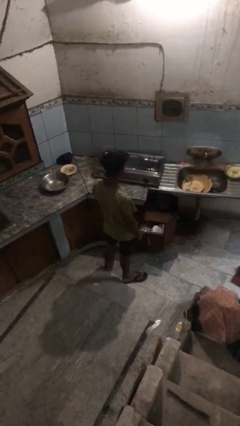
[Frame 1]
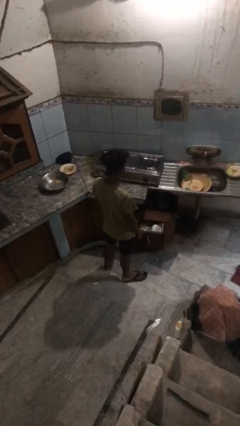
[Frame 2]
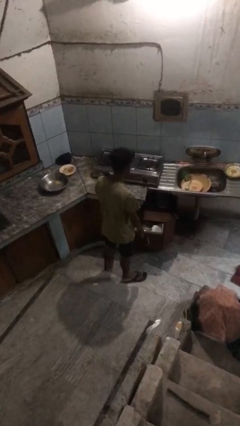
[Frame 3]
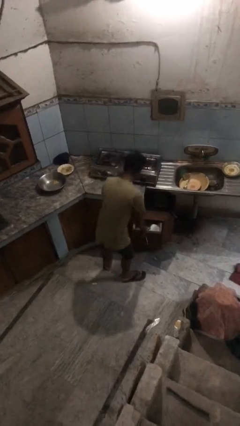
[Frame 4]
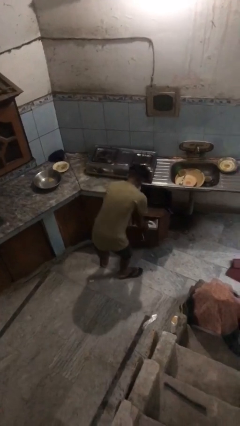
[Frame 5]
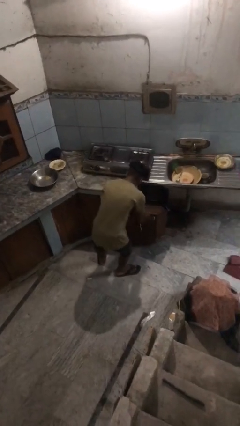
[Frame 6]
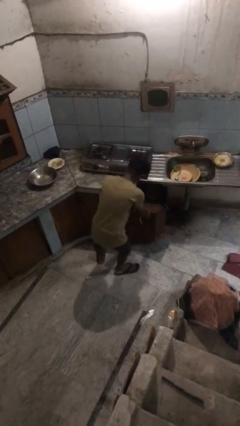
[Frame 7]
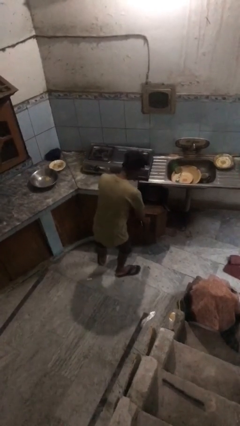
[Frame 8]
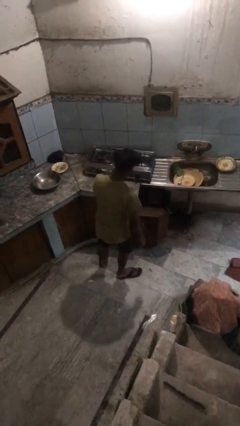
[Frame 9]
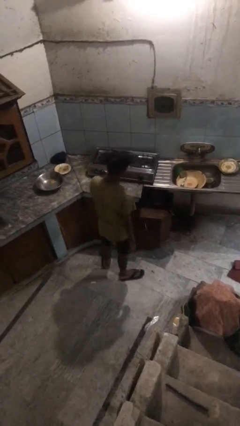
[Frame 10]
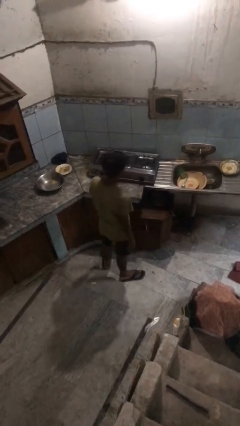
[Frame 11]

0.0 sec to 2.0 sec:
person closes kitchen drawer

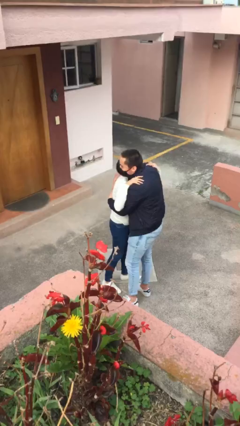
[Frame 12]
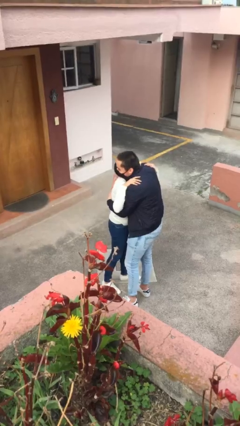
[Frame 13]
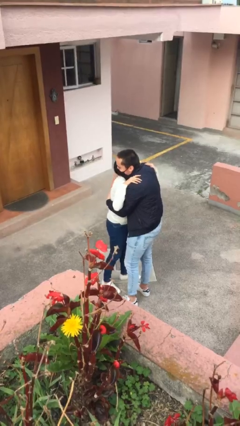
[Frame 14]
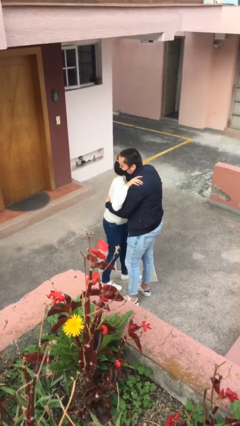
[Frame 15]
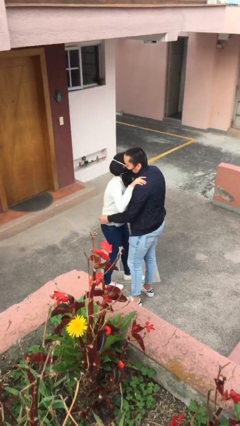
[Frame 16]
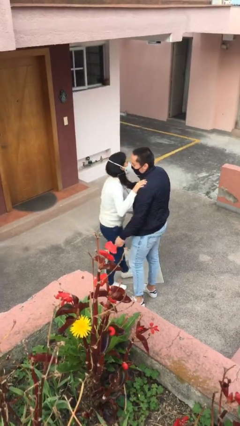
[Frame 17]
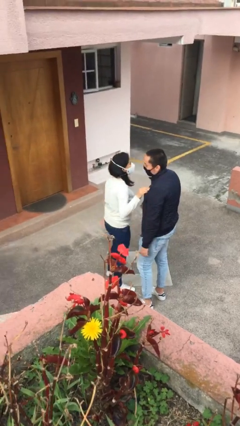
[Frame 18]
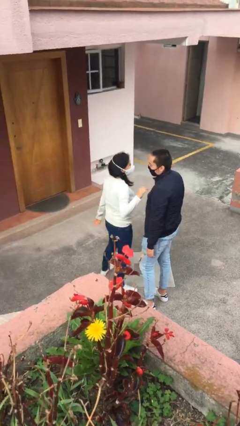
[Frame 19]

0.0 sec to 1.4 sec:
person embraces person

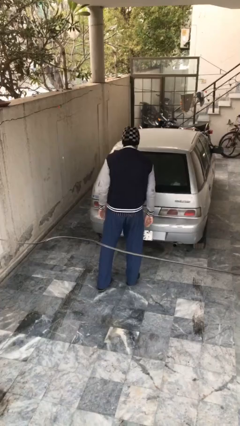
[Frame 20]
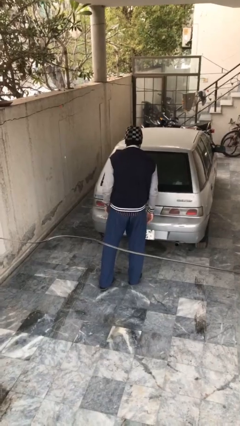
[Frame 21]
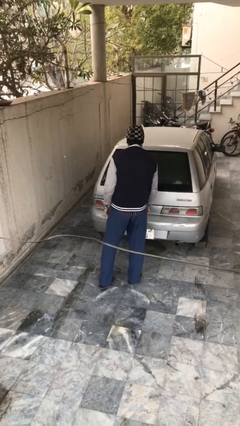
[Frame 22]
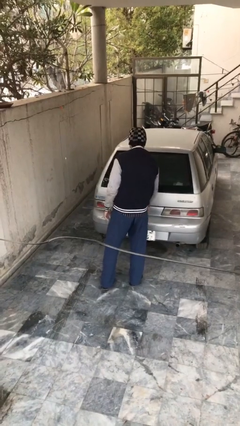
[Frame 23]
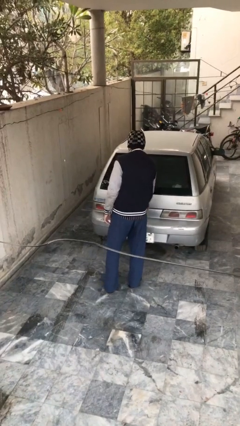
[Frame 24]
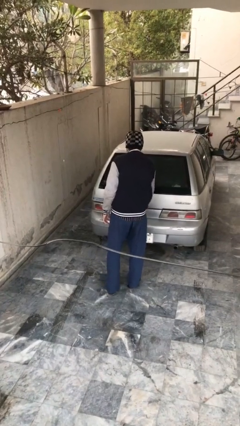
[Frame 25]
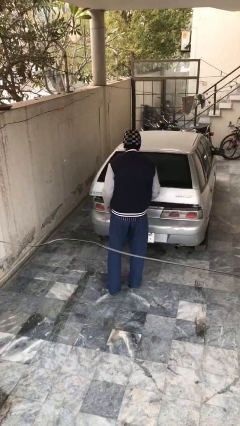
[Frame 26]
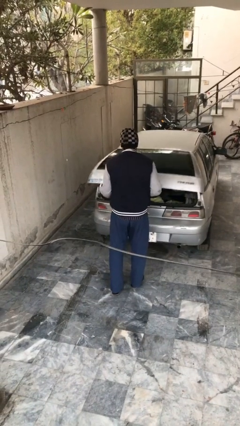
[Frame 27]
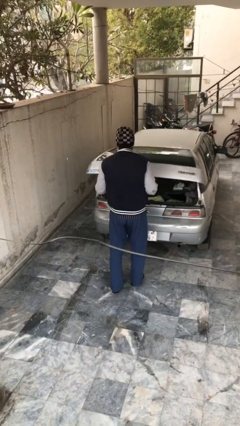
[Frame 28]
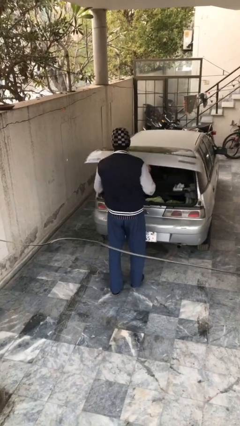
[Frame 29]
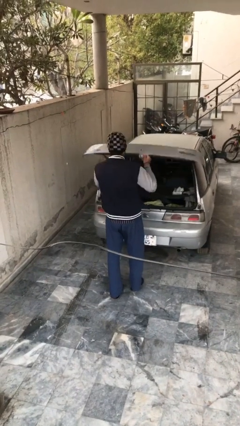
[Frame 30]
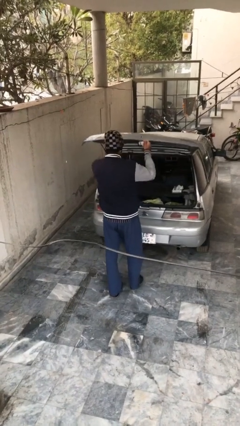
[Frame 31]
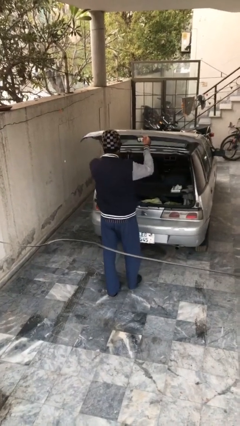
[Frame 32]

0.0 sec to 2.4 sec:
person opens car trunk

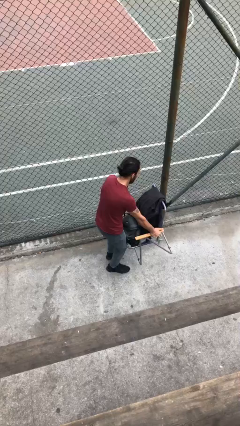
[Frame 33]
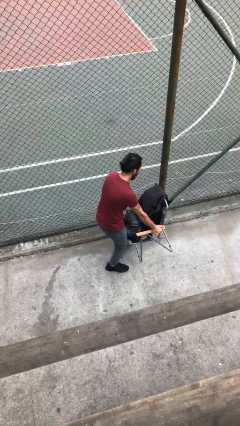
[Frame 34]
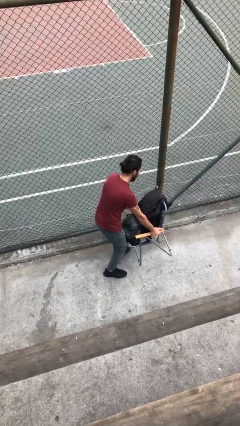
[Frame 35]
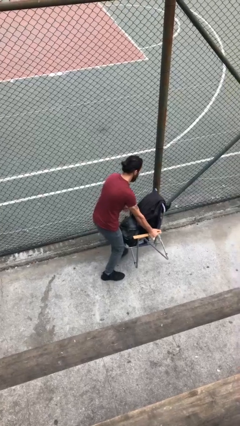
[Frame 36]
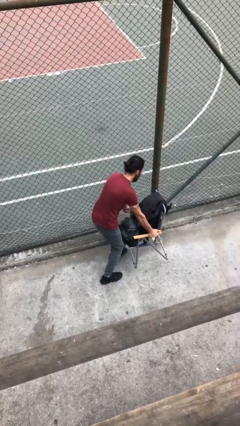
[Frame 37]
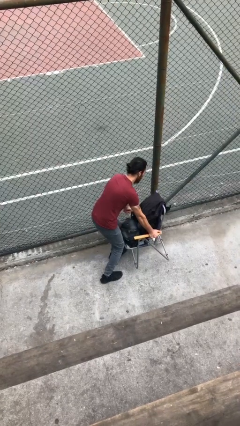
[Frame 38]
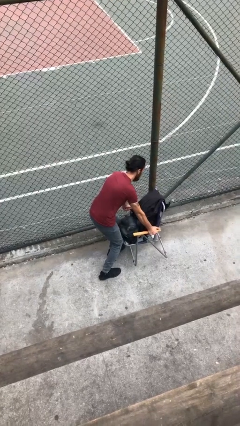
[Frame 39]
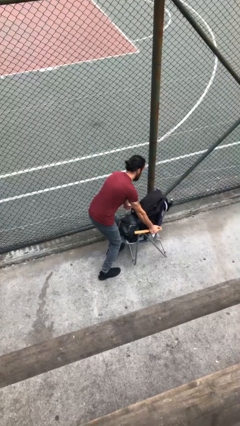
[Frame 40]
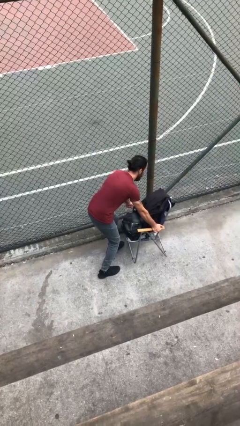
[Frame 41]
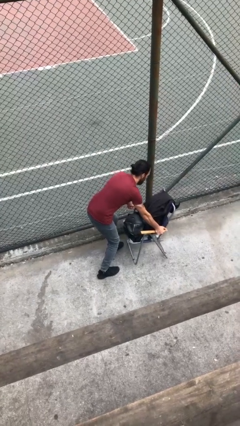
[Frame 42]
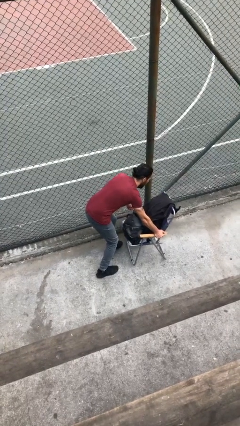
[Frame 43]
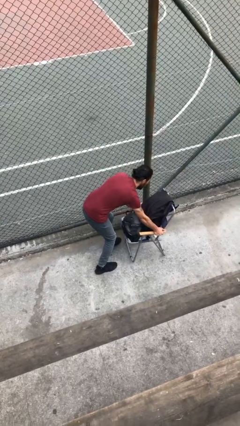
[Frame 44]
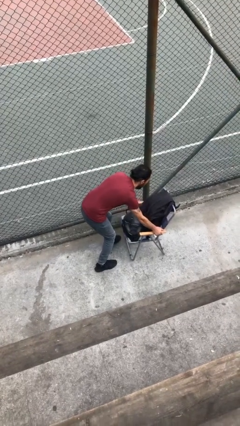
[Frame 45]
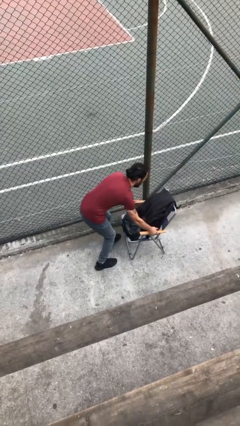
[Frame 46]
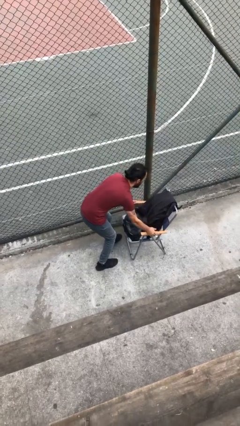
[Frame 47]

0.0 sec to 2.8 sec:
person puts down object on floor

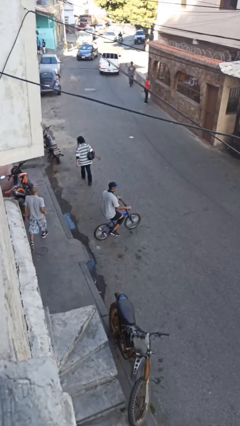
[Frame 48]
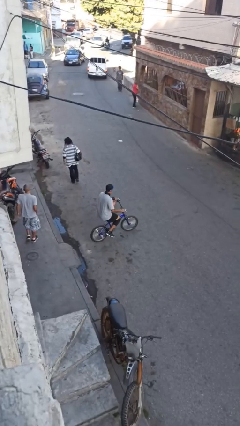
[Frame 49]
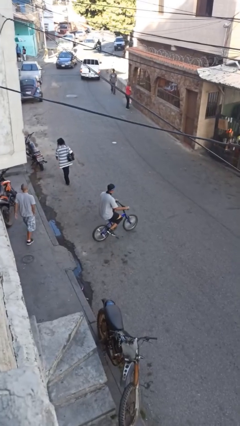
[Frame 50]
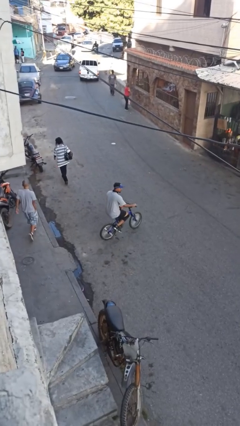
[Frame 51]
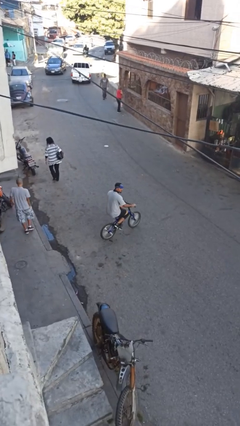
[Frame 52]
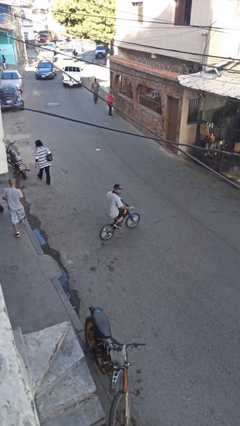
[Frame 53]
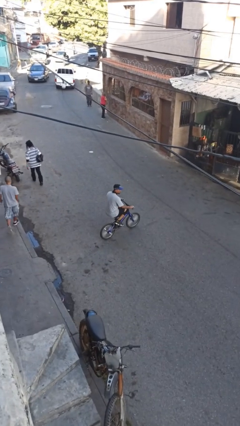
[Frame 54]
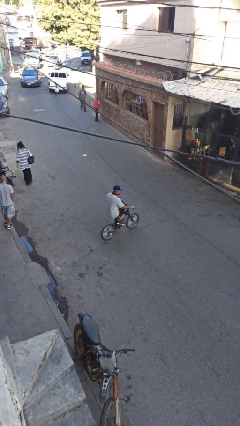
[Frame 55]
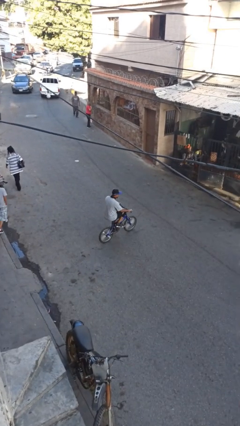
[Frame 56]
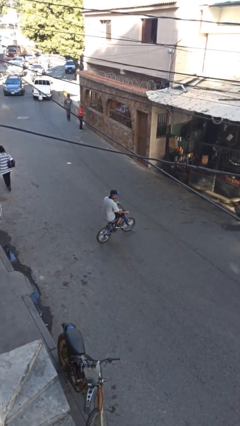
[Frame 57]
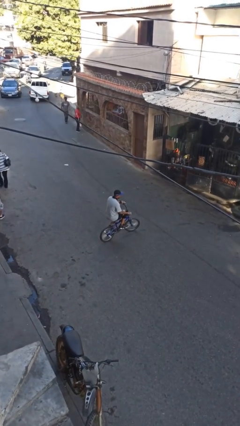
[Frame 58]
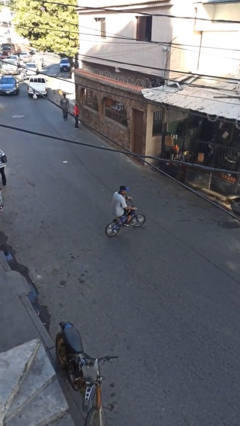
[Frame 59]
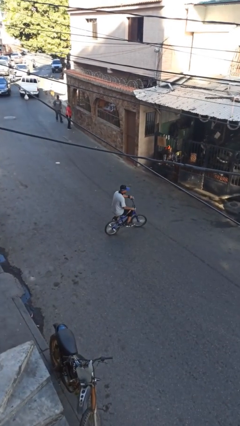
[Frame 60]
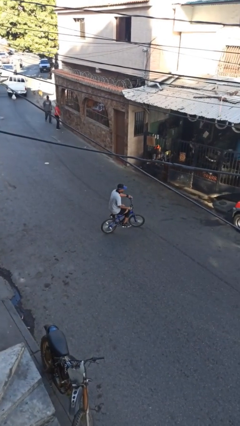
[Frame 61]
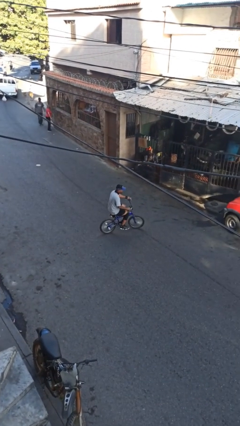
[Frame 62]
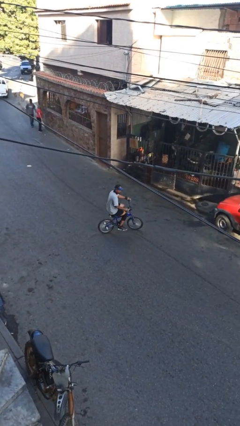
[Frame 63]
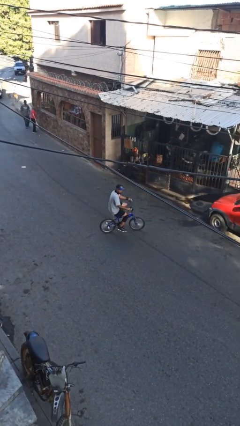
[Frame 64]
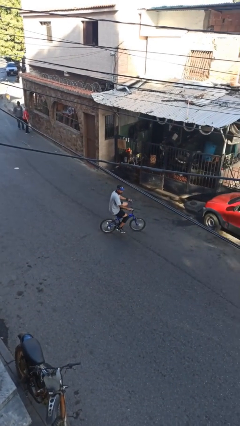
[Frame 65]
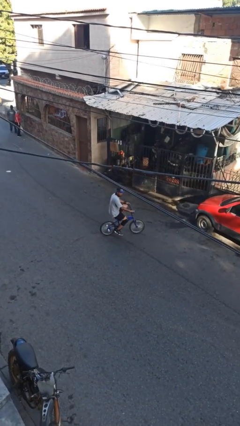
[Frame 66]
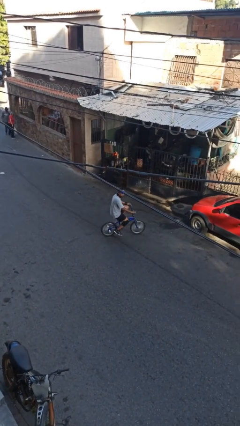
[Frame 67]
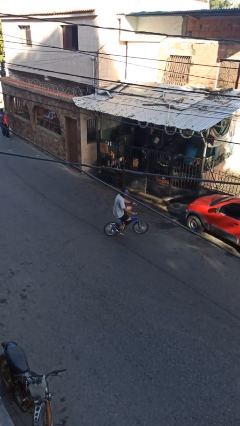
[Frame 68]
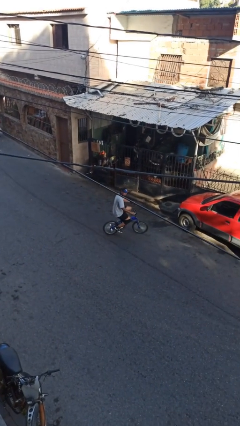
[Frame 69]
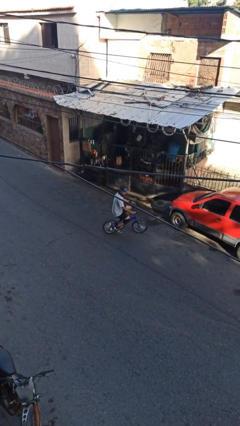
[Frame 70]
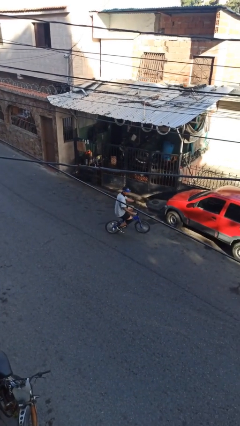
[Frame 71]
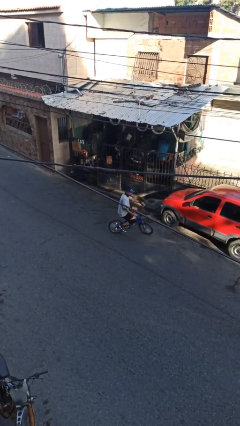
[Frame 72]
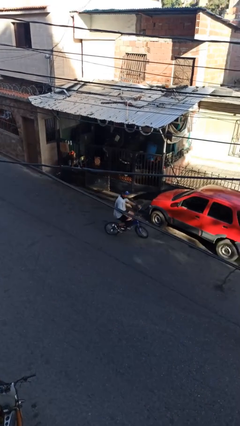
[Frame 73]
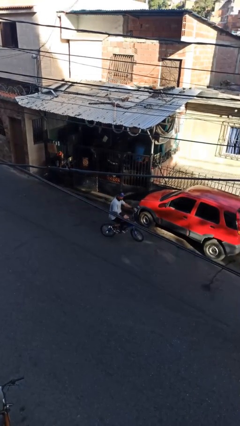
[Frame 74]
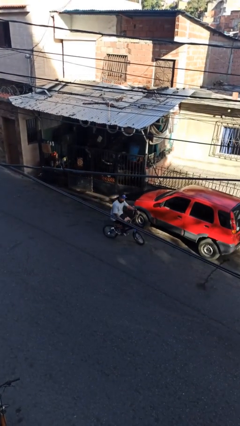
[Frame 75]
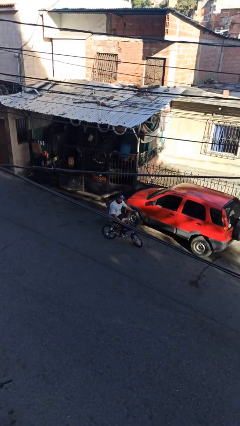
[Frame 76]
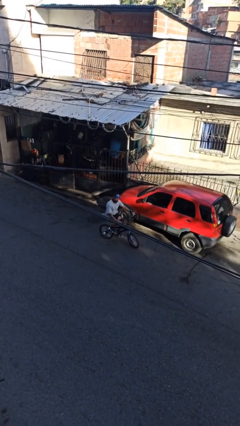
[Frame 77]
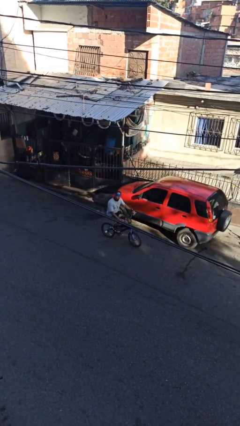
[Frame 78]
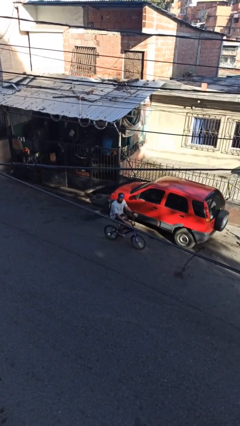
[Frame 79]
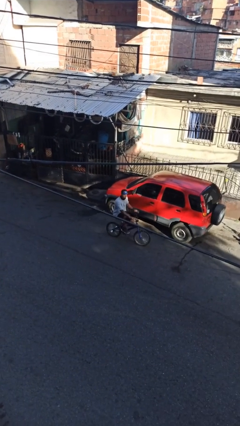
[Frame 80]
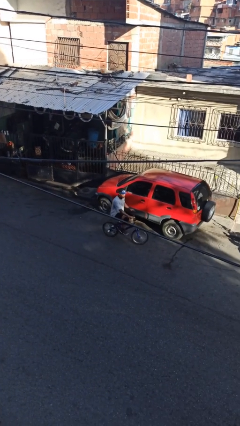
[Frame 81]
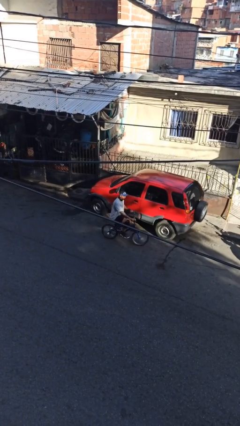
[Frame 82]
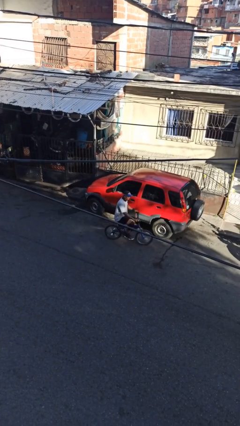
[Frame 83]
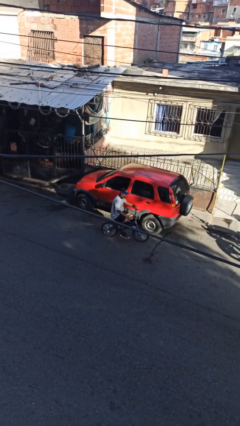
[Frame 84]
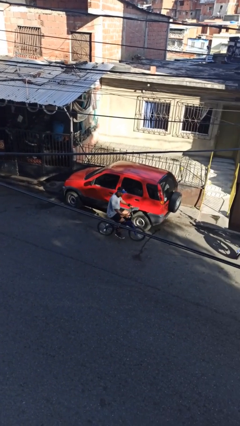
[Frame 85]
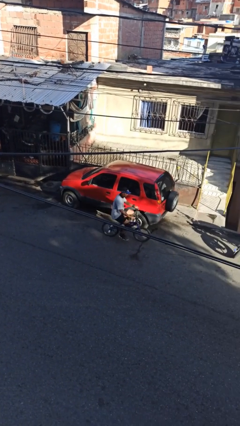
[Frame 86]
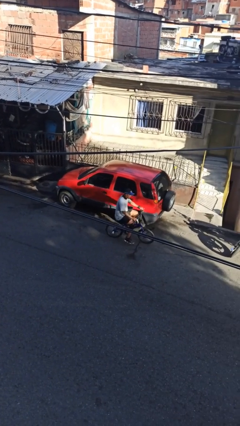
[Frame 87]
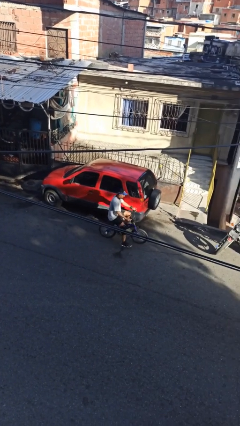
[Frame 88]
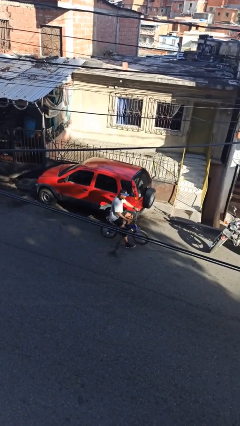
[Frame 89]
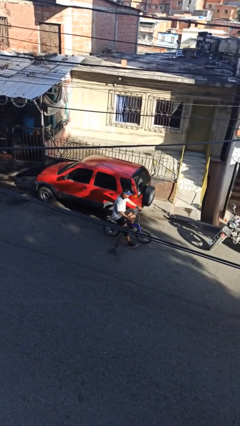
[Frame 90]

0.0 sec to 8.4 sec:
person rides bicycle

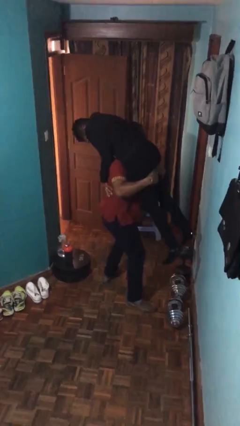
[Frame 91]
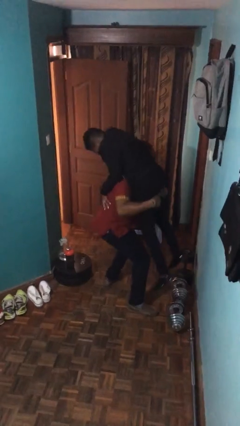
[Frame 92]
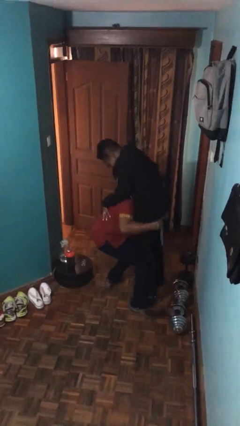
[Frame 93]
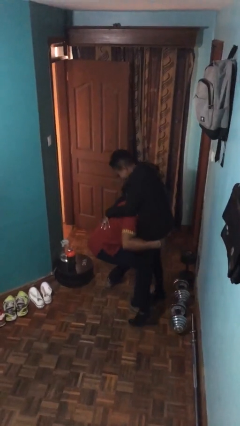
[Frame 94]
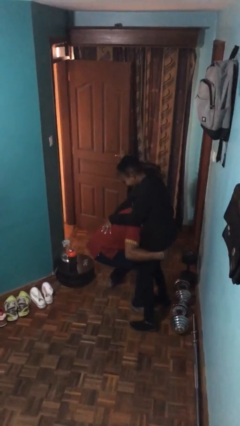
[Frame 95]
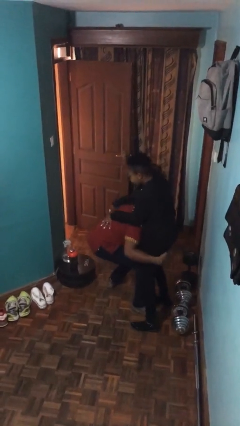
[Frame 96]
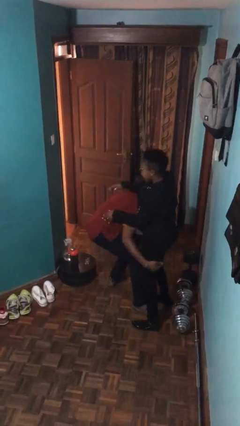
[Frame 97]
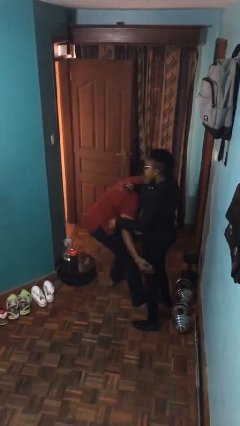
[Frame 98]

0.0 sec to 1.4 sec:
person puts down person
